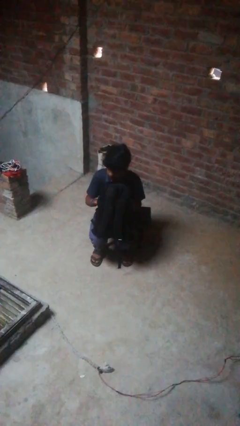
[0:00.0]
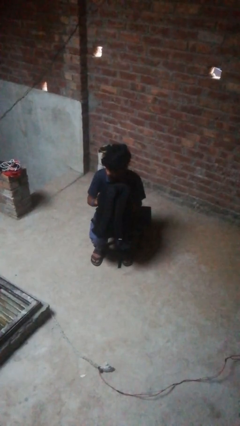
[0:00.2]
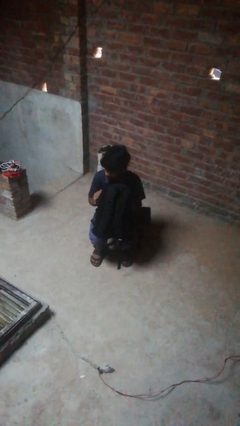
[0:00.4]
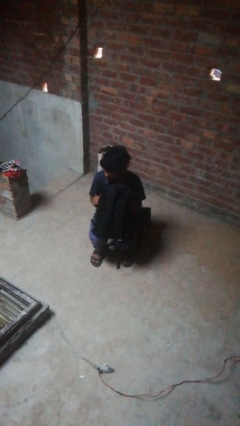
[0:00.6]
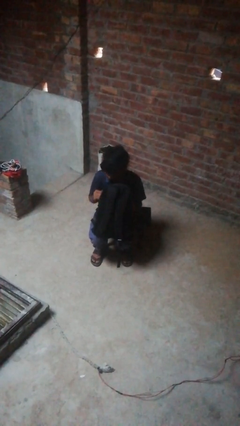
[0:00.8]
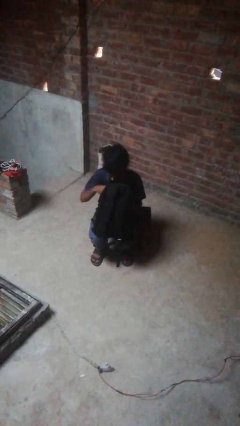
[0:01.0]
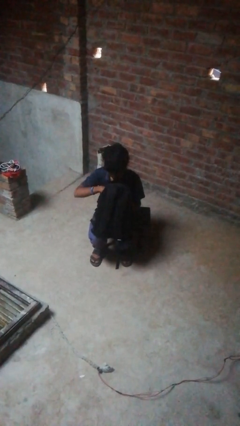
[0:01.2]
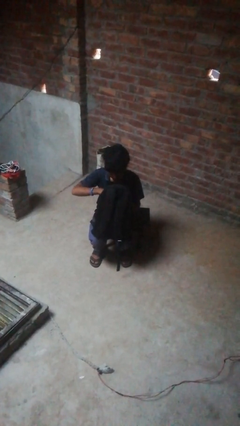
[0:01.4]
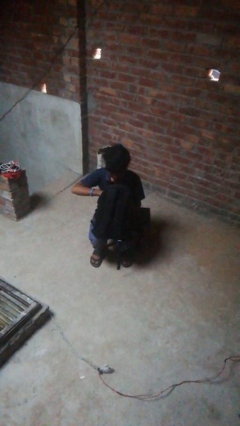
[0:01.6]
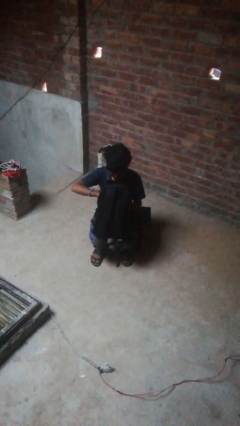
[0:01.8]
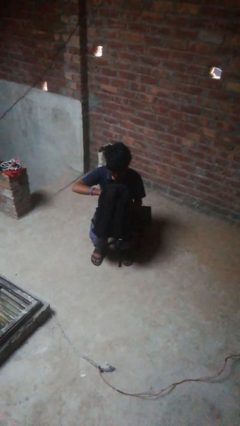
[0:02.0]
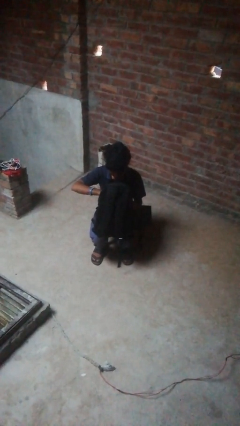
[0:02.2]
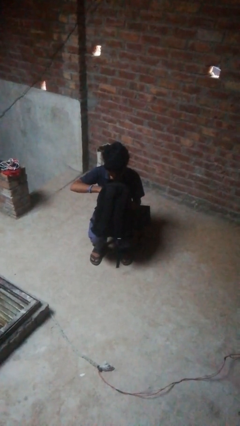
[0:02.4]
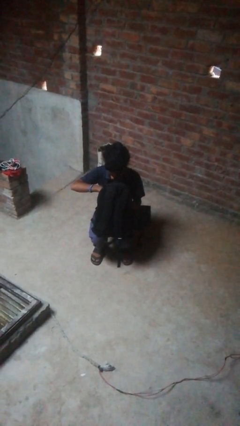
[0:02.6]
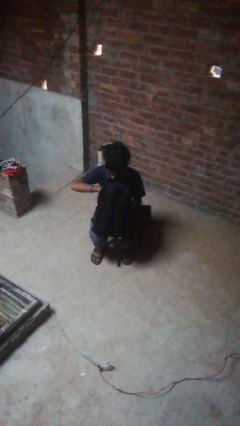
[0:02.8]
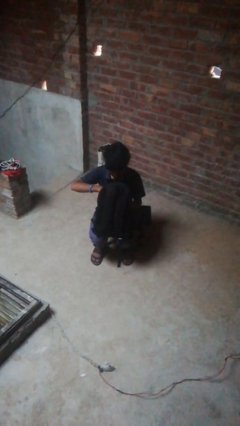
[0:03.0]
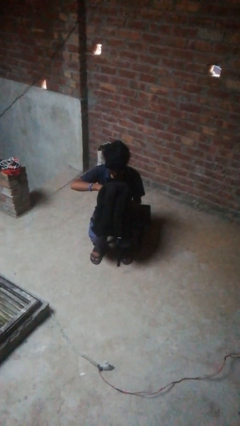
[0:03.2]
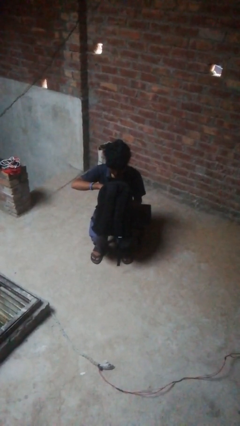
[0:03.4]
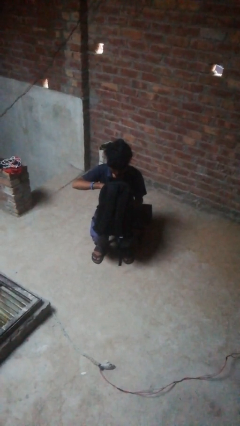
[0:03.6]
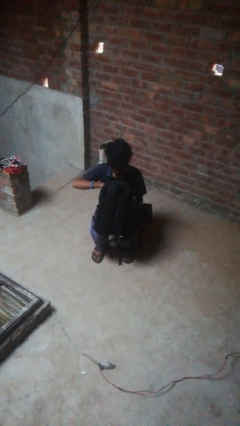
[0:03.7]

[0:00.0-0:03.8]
person searches in backpack

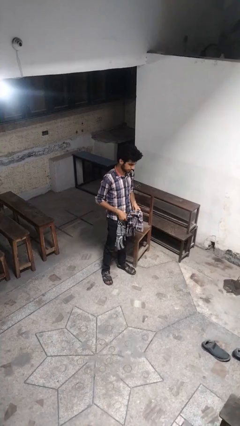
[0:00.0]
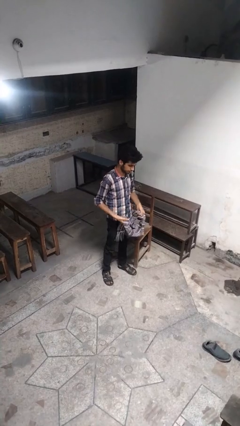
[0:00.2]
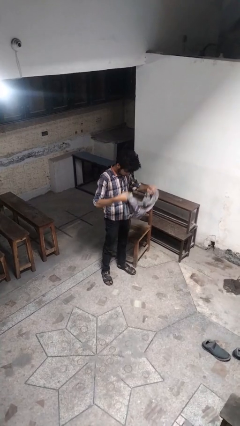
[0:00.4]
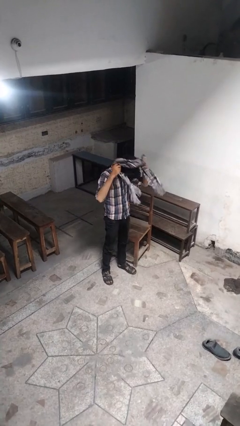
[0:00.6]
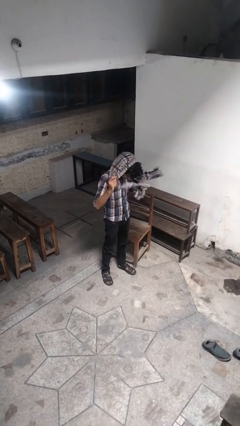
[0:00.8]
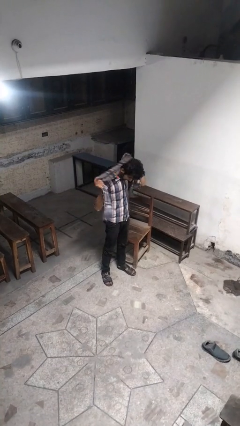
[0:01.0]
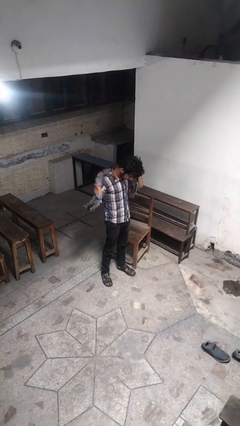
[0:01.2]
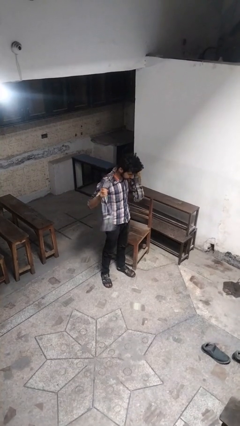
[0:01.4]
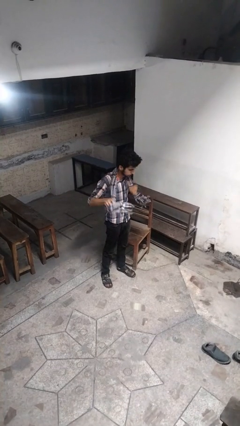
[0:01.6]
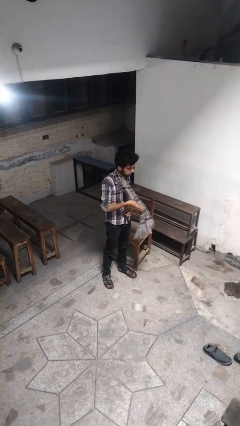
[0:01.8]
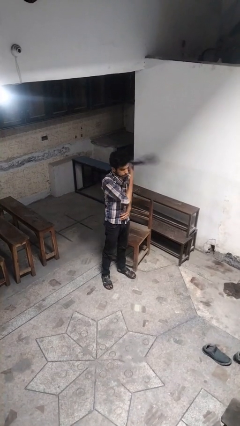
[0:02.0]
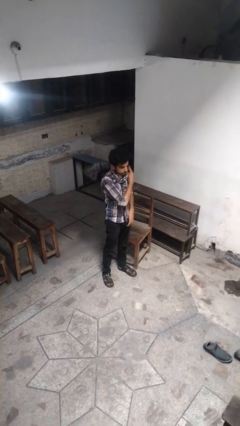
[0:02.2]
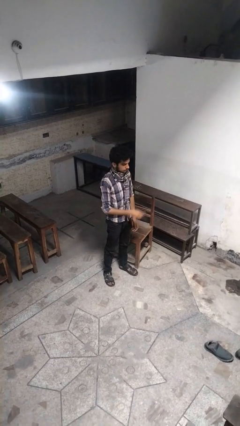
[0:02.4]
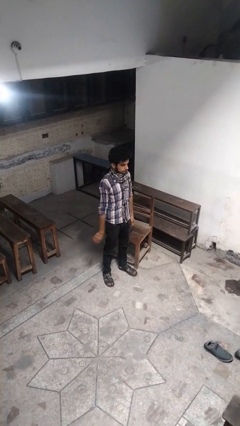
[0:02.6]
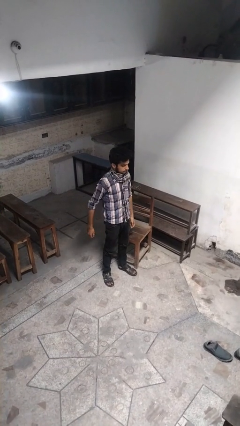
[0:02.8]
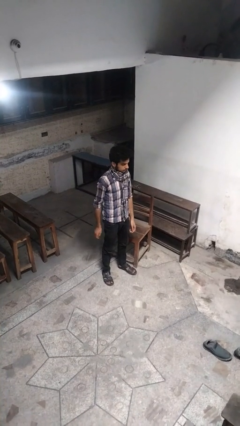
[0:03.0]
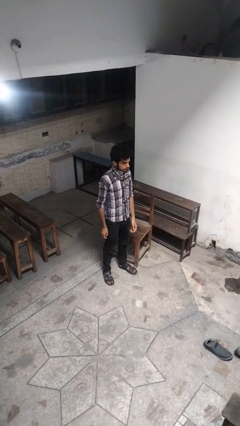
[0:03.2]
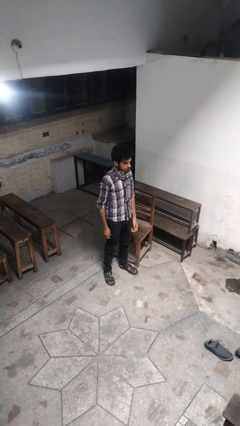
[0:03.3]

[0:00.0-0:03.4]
person puts on scarf

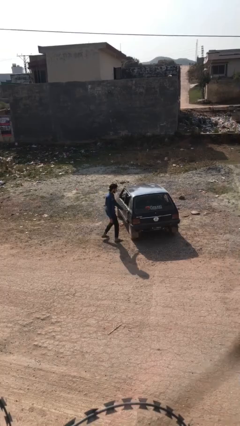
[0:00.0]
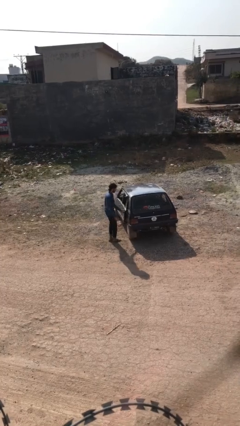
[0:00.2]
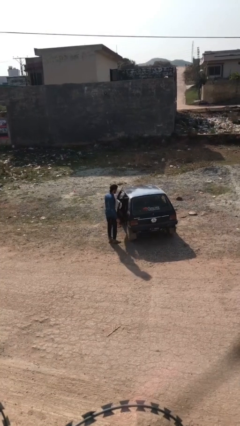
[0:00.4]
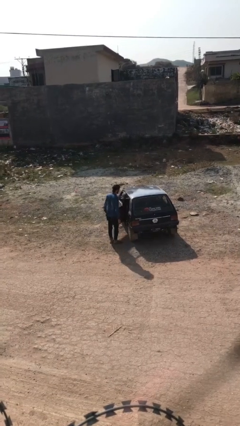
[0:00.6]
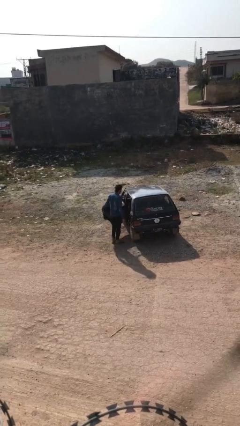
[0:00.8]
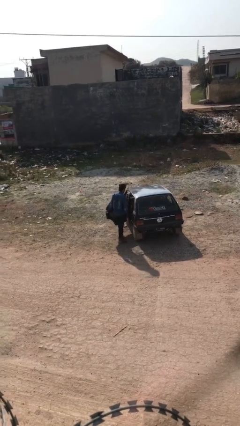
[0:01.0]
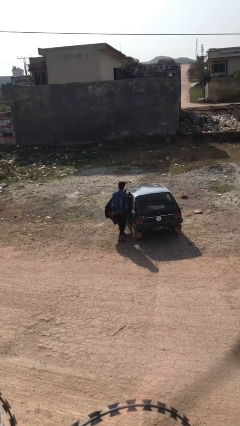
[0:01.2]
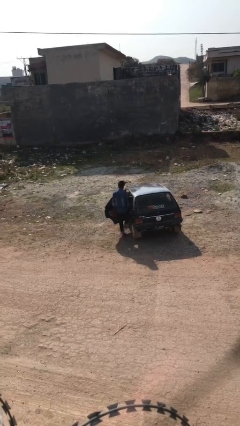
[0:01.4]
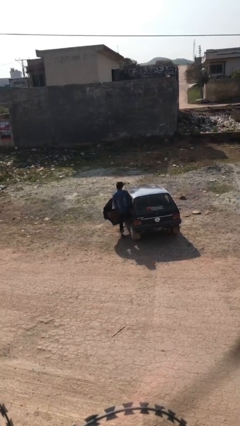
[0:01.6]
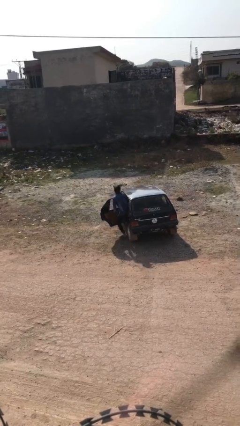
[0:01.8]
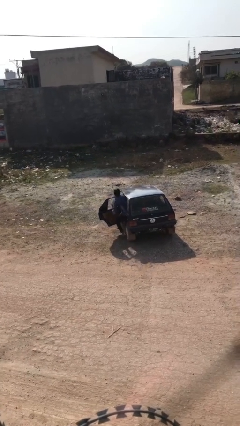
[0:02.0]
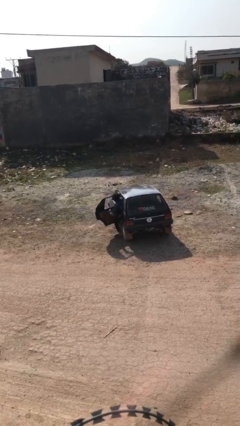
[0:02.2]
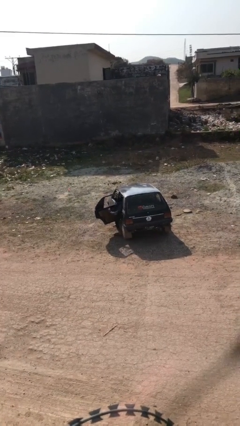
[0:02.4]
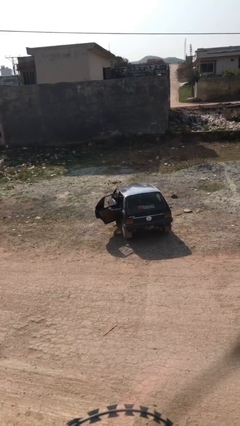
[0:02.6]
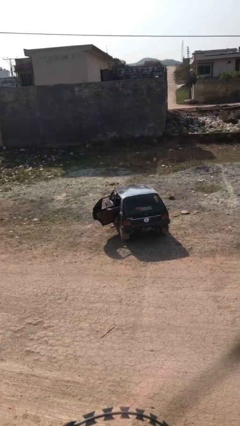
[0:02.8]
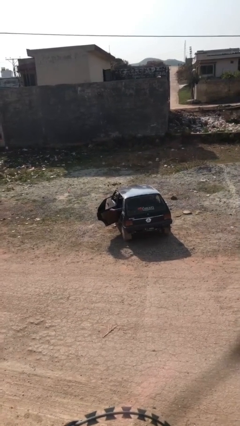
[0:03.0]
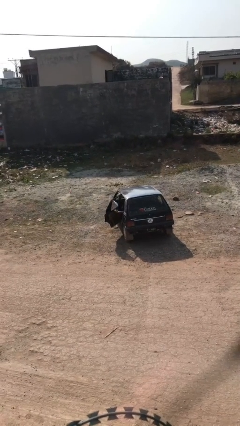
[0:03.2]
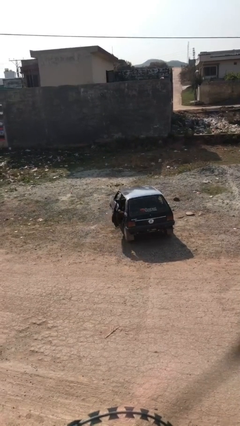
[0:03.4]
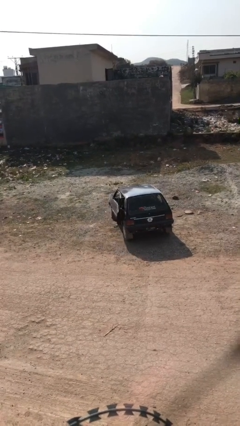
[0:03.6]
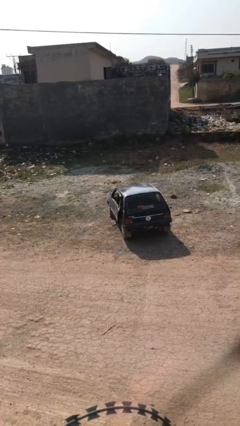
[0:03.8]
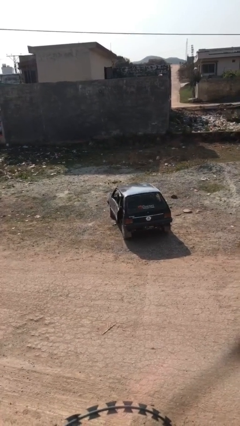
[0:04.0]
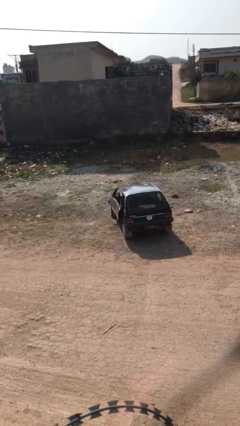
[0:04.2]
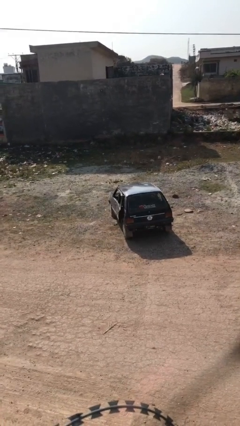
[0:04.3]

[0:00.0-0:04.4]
car picks up person

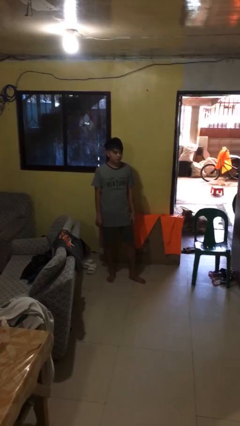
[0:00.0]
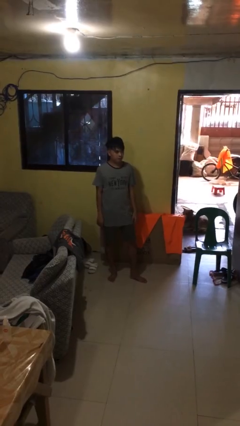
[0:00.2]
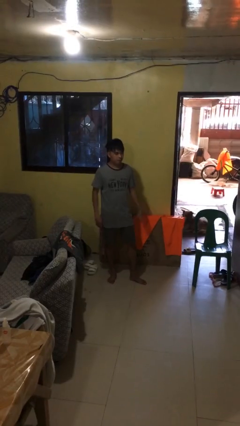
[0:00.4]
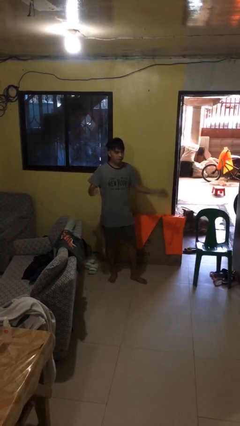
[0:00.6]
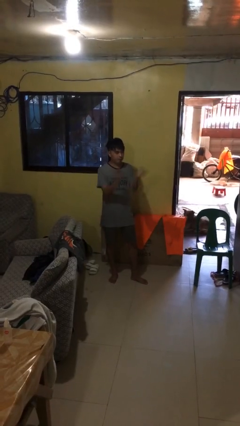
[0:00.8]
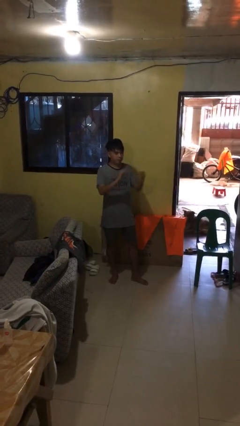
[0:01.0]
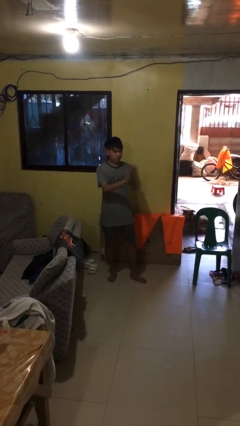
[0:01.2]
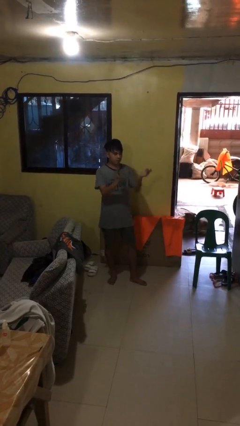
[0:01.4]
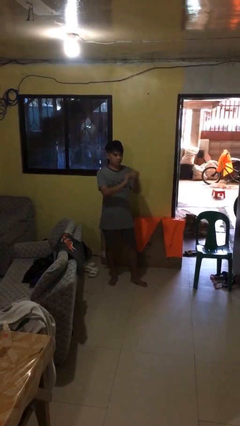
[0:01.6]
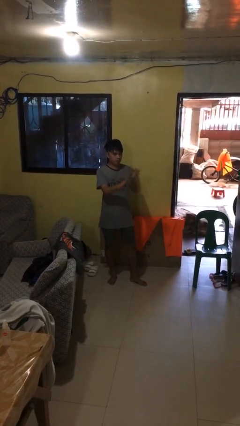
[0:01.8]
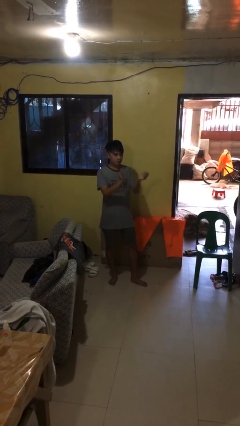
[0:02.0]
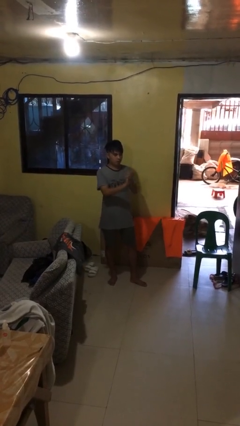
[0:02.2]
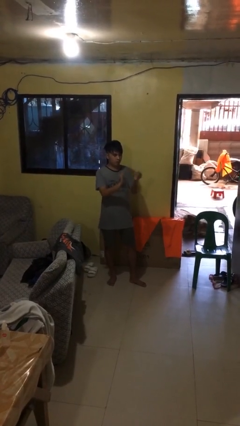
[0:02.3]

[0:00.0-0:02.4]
person claps hands

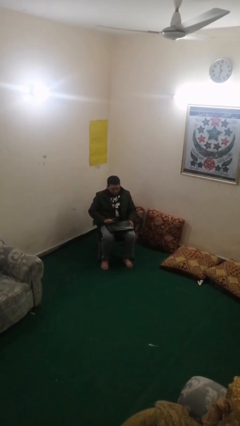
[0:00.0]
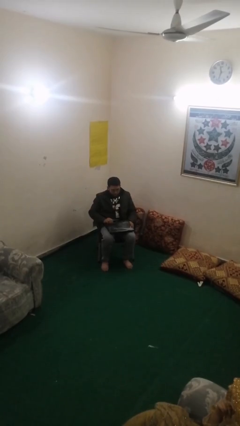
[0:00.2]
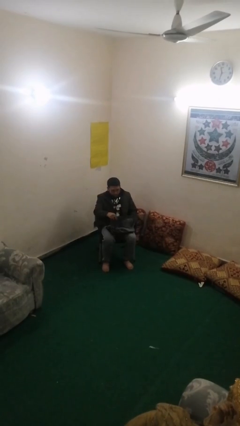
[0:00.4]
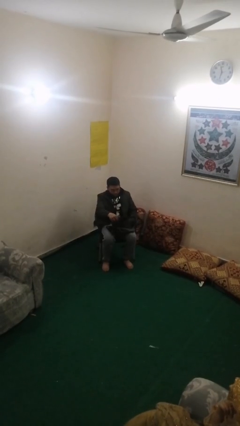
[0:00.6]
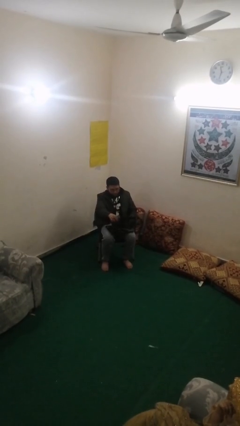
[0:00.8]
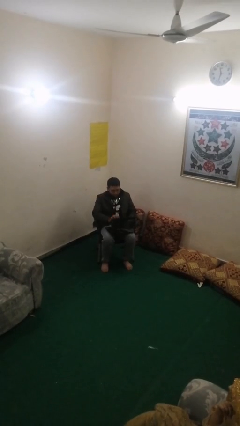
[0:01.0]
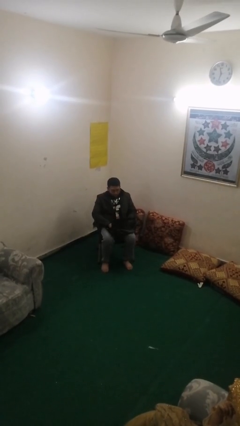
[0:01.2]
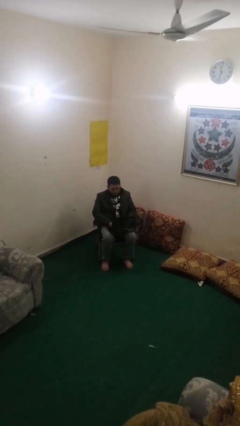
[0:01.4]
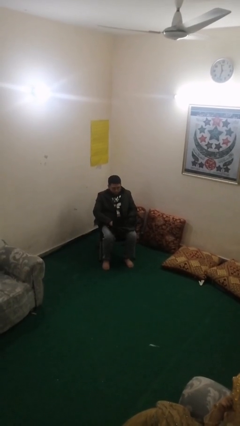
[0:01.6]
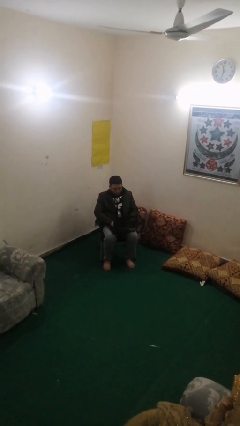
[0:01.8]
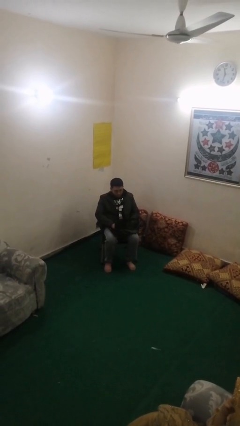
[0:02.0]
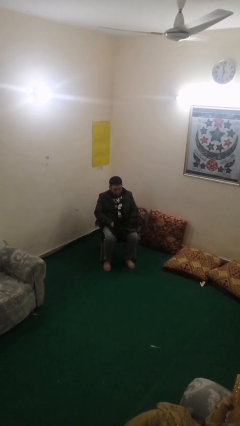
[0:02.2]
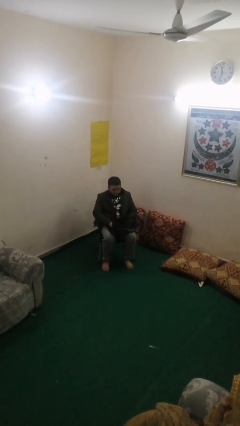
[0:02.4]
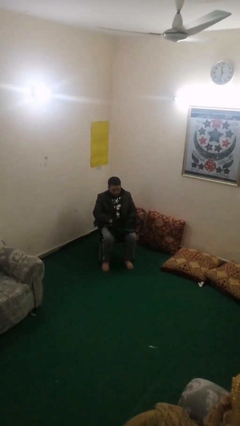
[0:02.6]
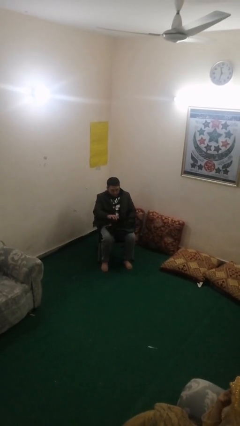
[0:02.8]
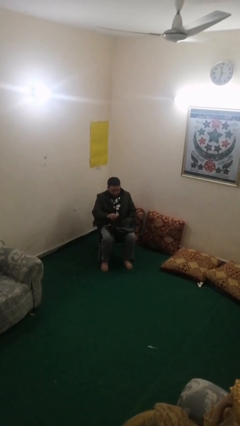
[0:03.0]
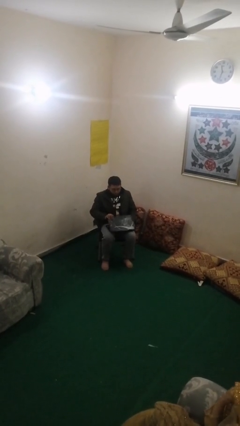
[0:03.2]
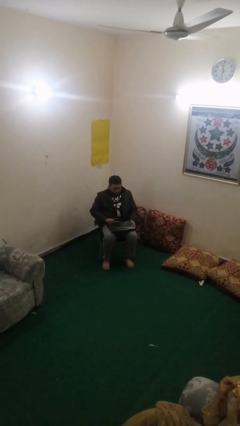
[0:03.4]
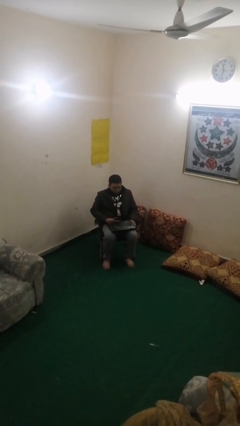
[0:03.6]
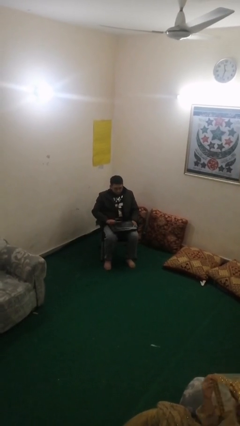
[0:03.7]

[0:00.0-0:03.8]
person interacts with laptop
